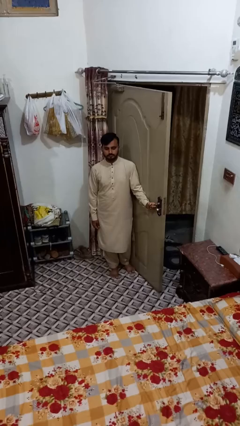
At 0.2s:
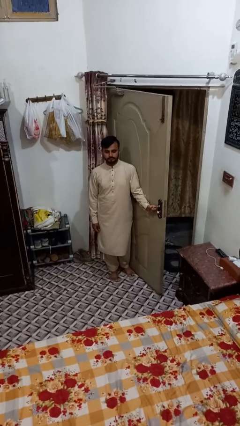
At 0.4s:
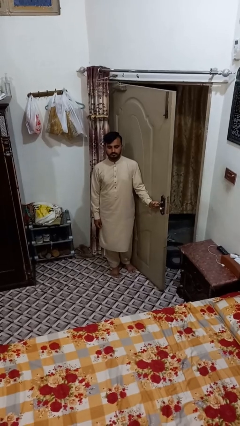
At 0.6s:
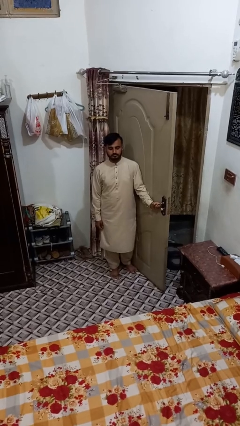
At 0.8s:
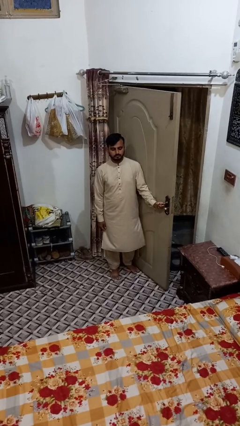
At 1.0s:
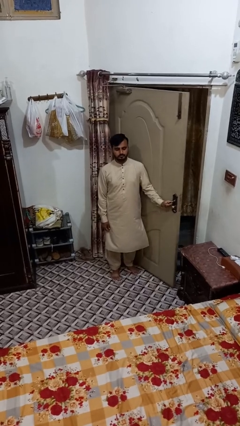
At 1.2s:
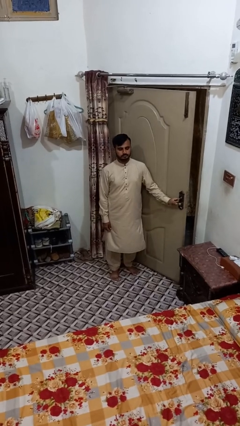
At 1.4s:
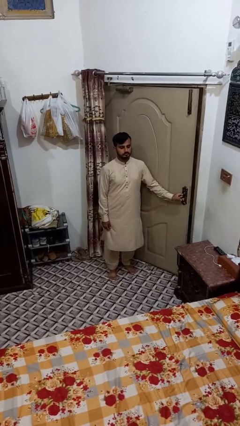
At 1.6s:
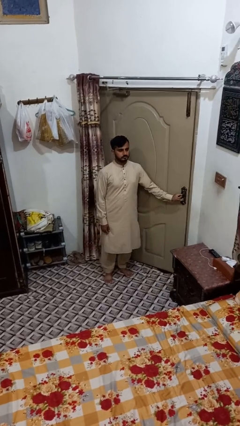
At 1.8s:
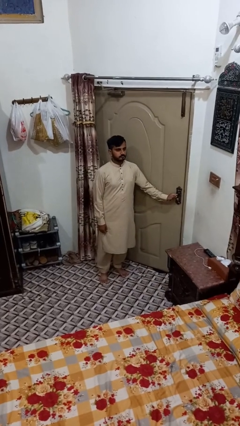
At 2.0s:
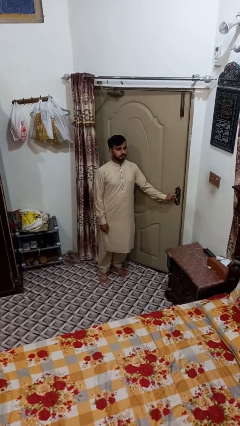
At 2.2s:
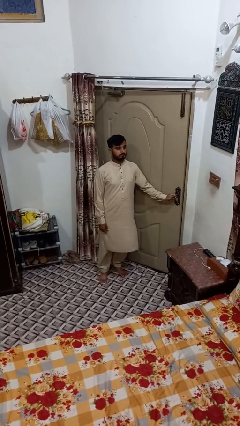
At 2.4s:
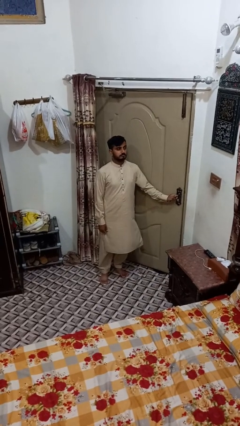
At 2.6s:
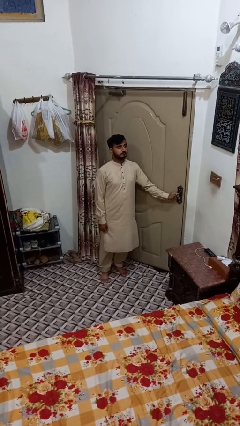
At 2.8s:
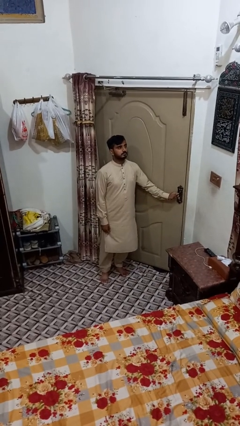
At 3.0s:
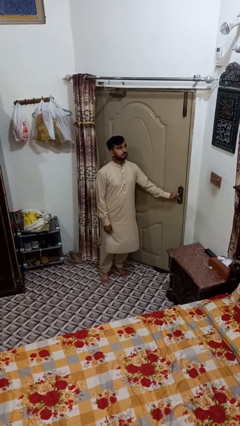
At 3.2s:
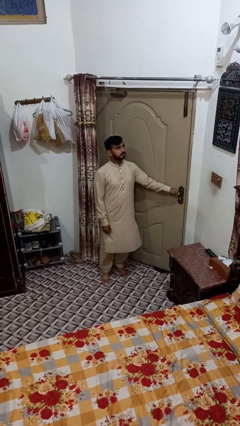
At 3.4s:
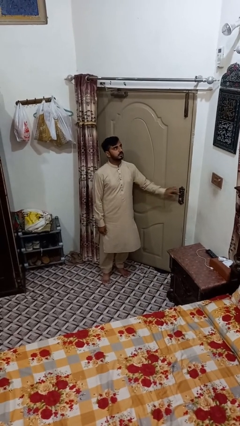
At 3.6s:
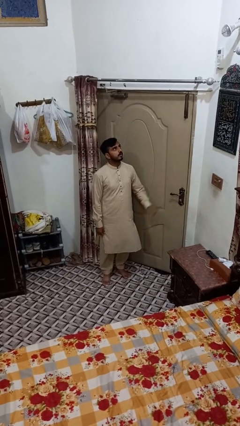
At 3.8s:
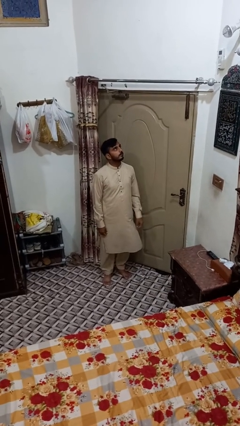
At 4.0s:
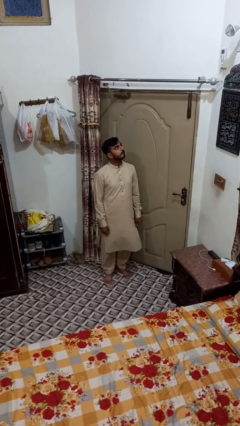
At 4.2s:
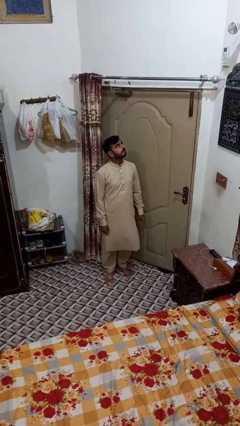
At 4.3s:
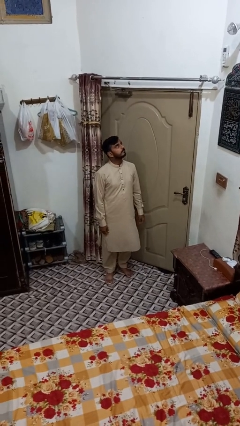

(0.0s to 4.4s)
person closes closet door

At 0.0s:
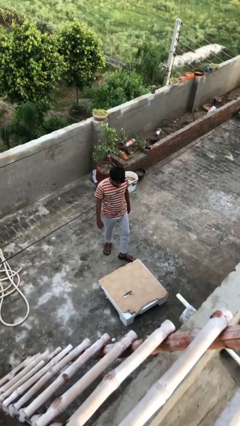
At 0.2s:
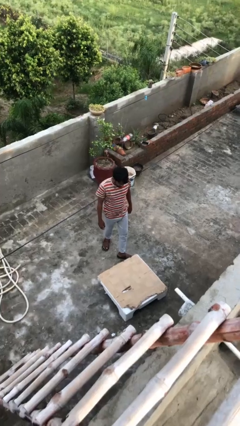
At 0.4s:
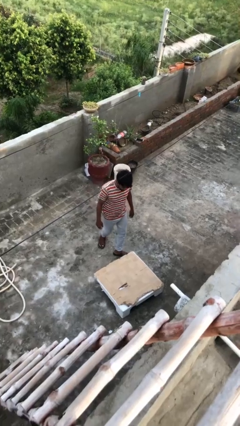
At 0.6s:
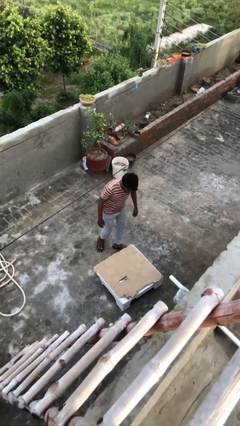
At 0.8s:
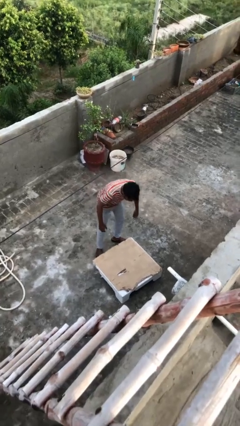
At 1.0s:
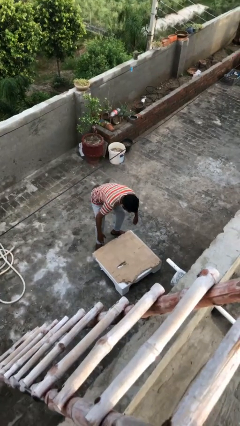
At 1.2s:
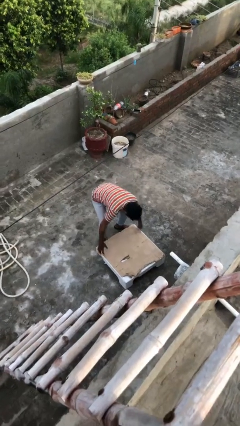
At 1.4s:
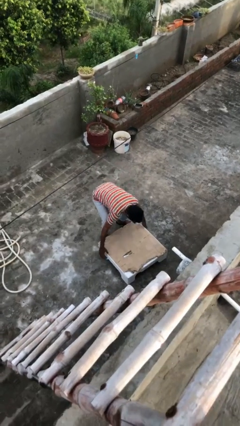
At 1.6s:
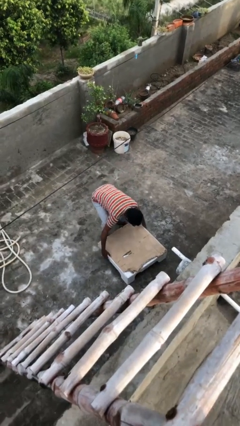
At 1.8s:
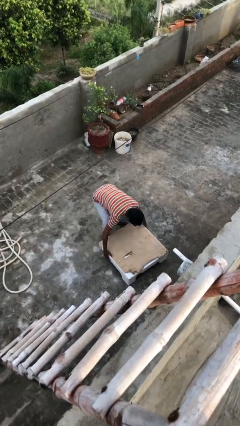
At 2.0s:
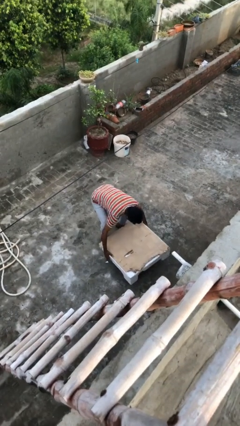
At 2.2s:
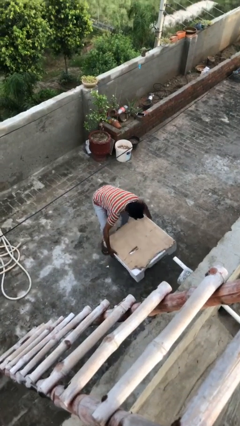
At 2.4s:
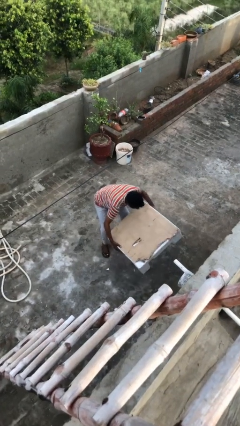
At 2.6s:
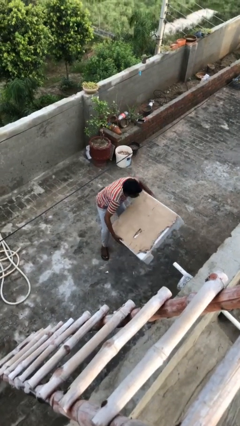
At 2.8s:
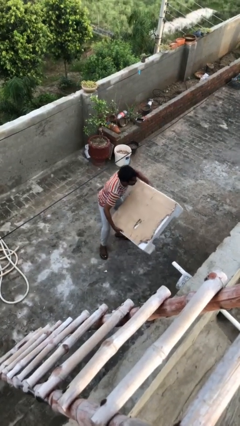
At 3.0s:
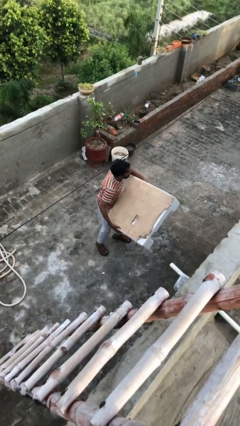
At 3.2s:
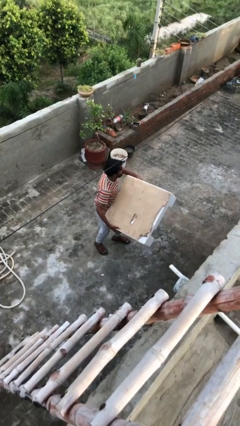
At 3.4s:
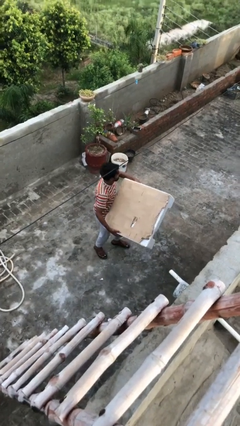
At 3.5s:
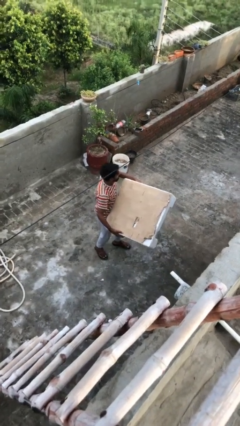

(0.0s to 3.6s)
person picks up object from floor

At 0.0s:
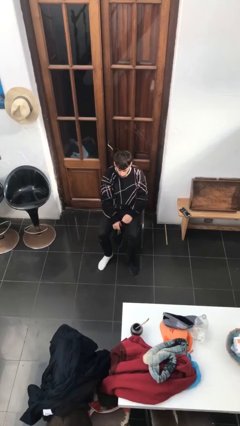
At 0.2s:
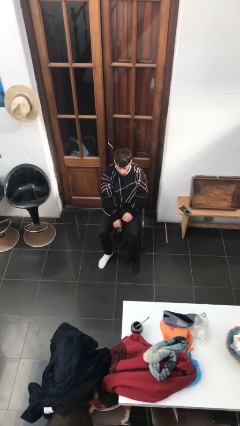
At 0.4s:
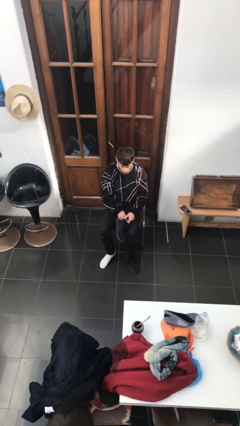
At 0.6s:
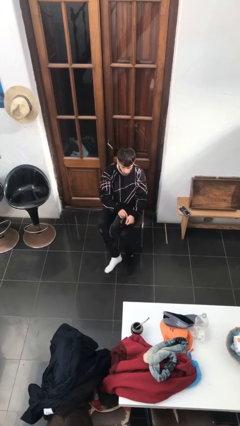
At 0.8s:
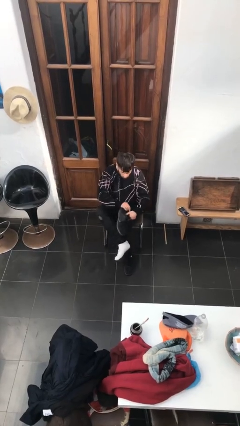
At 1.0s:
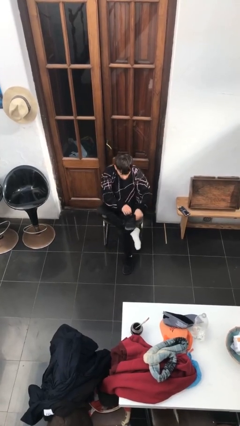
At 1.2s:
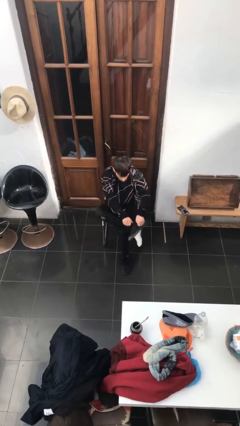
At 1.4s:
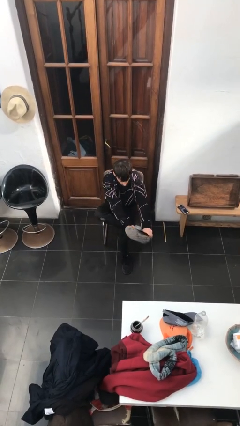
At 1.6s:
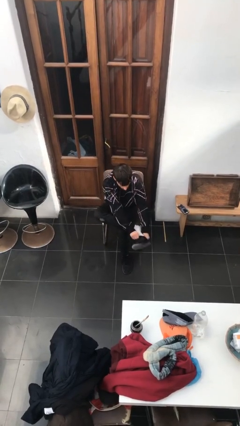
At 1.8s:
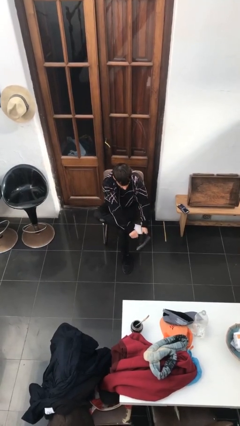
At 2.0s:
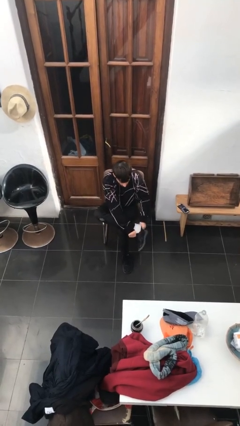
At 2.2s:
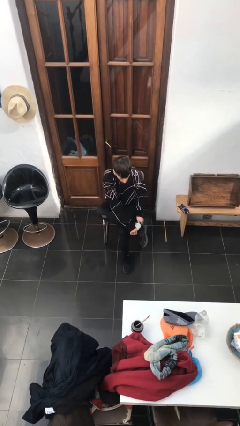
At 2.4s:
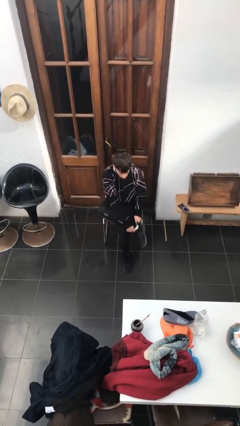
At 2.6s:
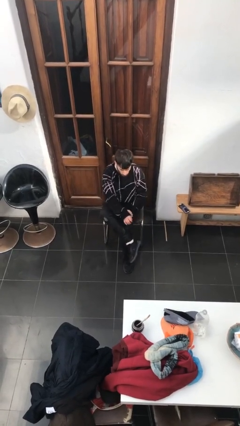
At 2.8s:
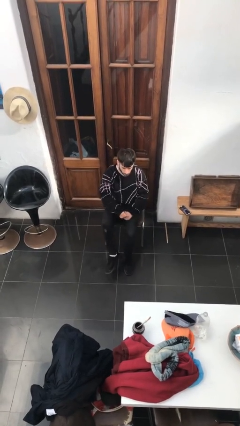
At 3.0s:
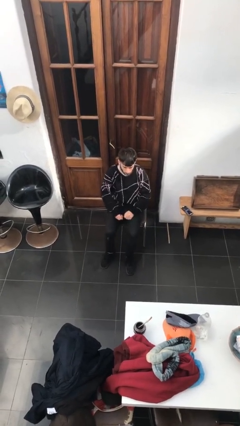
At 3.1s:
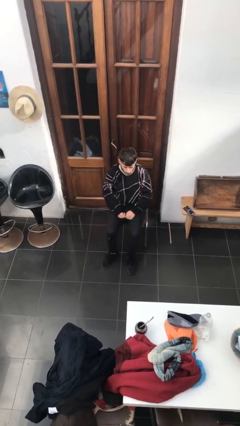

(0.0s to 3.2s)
person puts on shoes

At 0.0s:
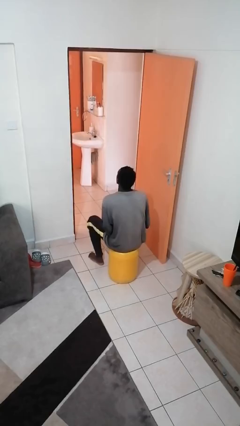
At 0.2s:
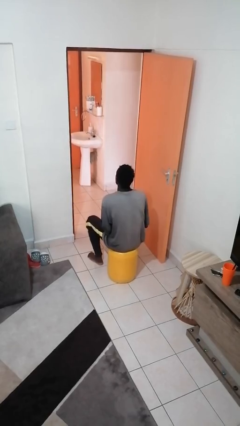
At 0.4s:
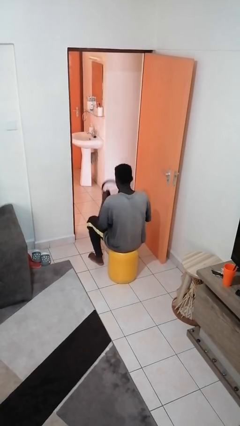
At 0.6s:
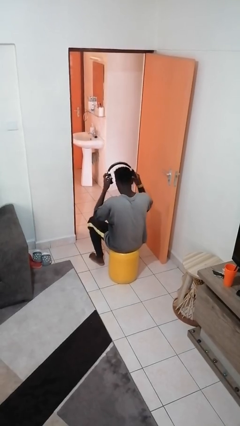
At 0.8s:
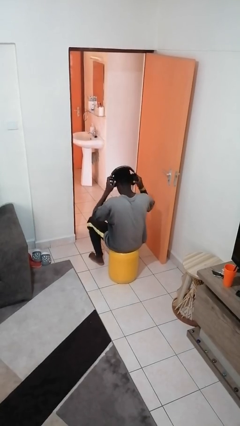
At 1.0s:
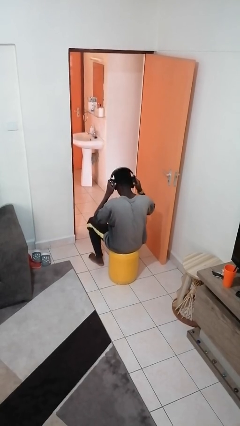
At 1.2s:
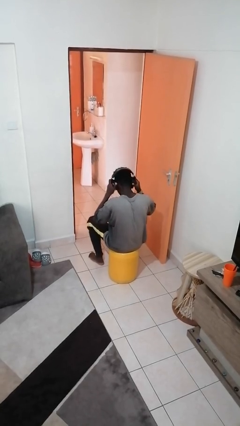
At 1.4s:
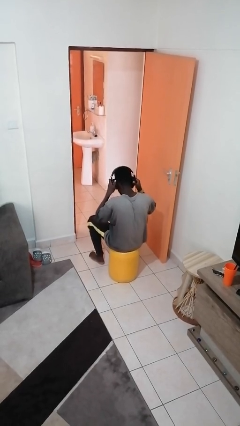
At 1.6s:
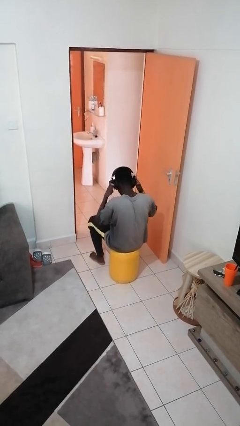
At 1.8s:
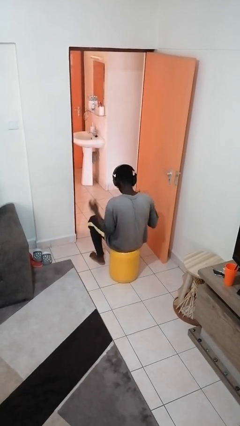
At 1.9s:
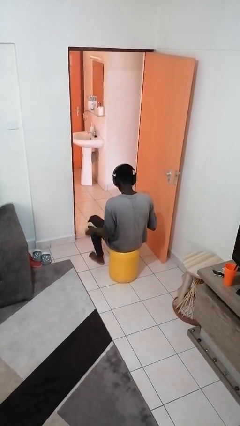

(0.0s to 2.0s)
person puts on headphones

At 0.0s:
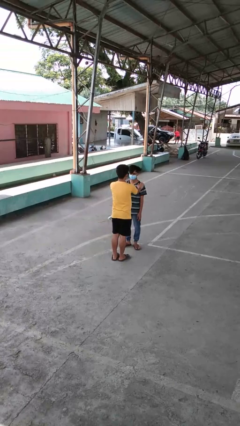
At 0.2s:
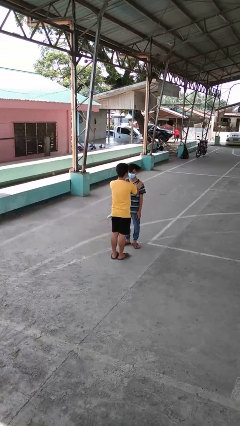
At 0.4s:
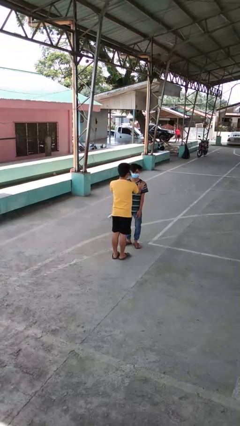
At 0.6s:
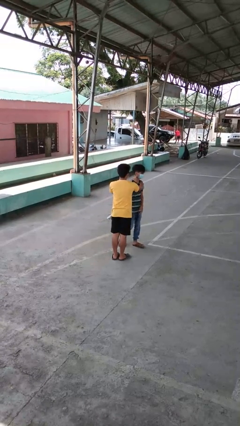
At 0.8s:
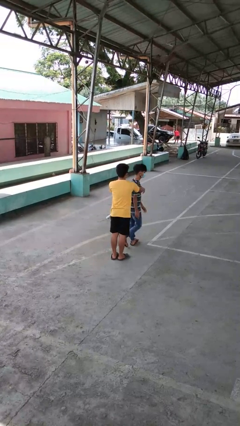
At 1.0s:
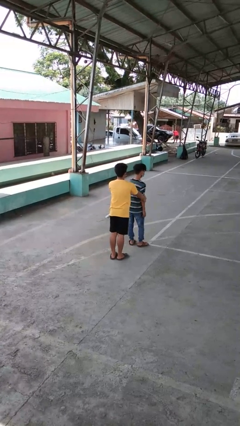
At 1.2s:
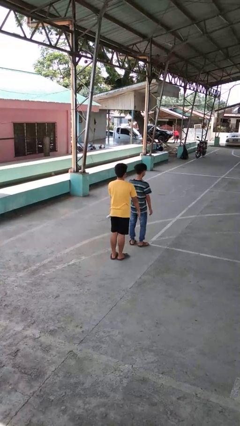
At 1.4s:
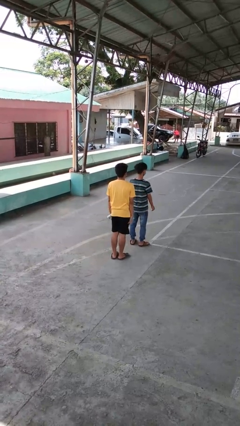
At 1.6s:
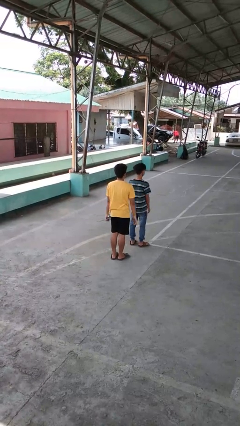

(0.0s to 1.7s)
person spins person around

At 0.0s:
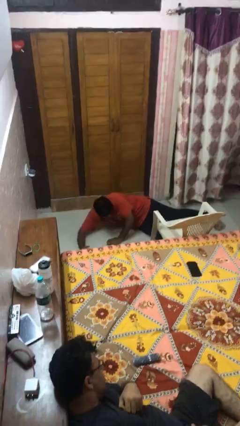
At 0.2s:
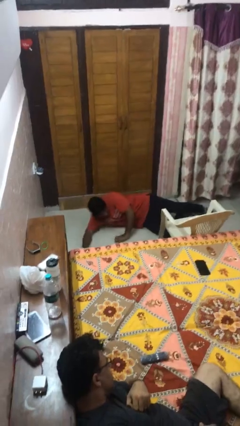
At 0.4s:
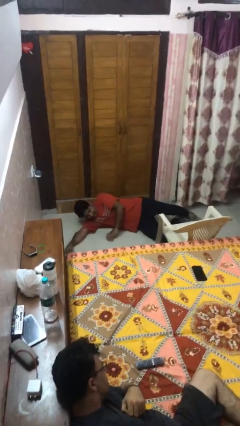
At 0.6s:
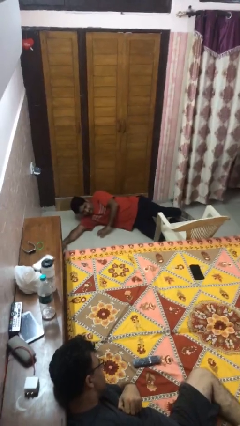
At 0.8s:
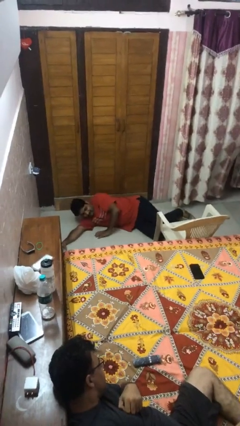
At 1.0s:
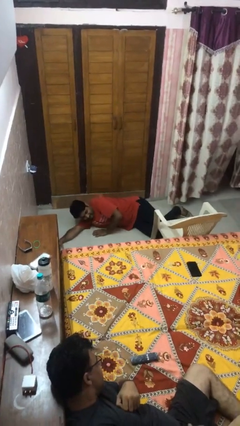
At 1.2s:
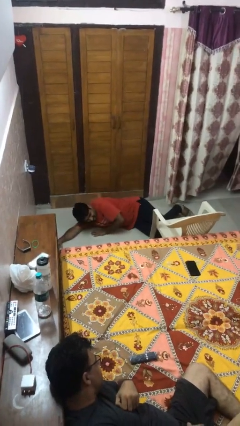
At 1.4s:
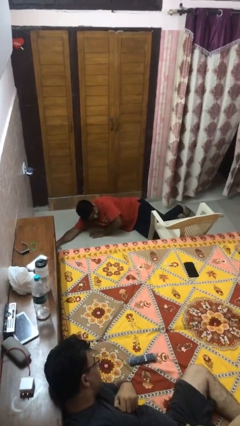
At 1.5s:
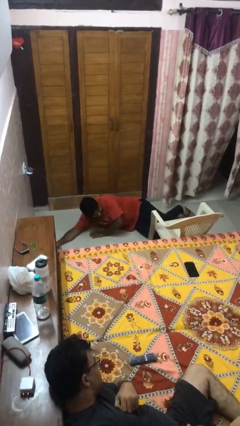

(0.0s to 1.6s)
person lies down on floor

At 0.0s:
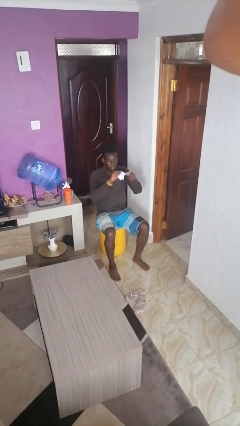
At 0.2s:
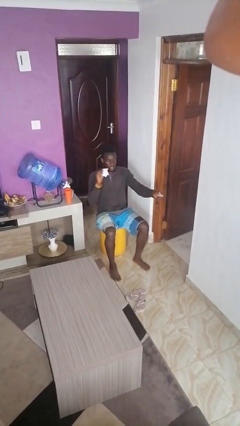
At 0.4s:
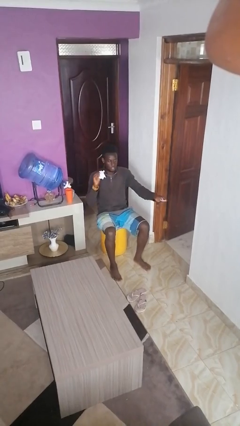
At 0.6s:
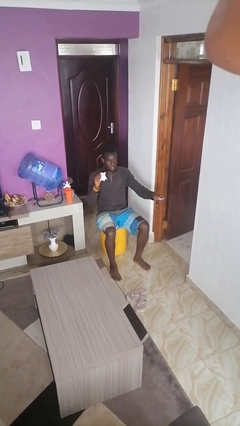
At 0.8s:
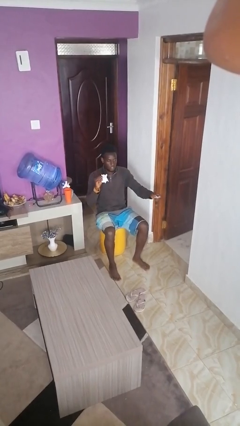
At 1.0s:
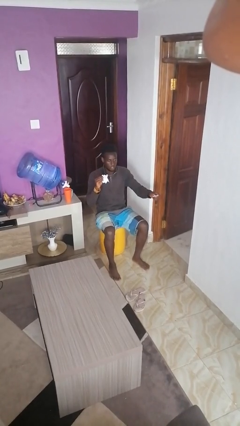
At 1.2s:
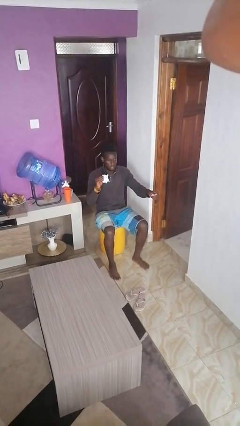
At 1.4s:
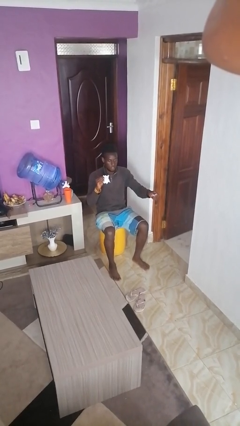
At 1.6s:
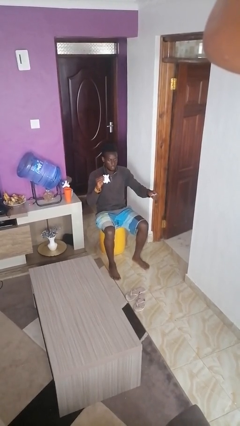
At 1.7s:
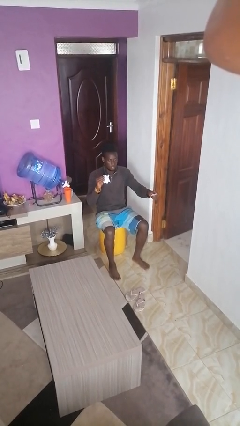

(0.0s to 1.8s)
person tears paper
